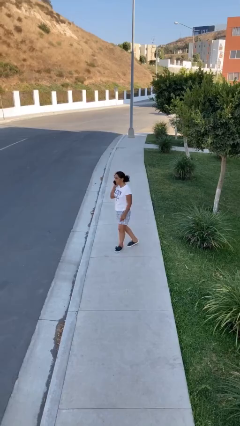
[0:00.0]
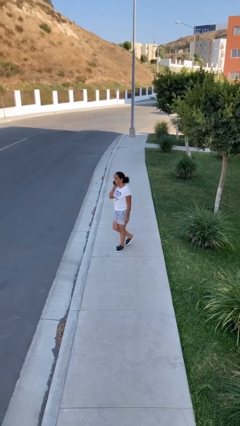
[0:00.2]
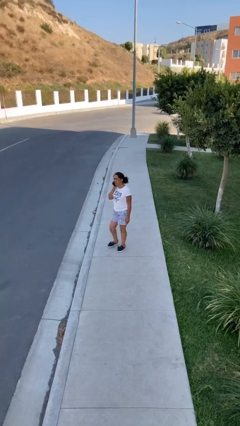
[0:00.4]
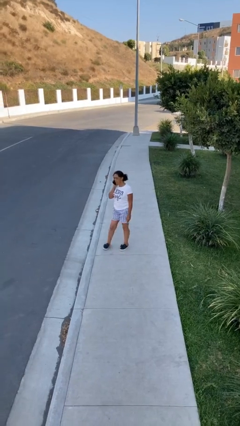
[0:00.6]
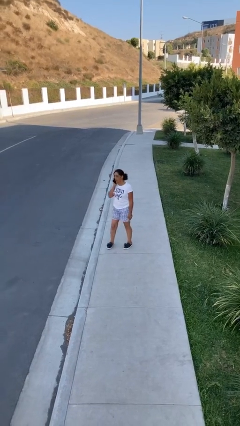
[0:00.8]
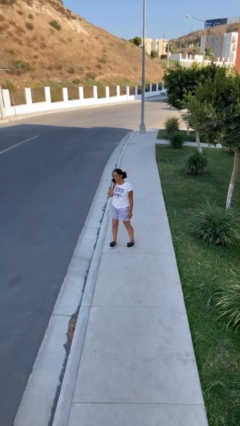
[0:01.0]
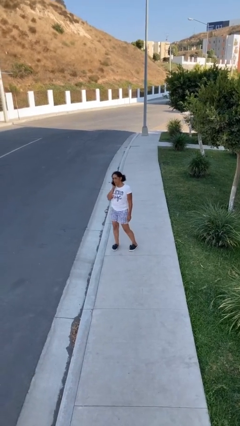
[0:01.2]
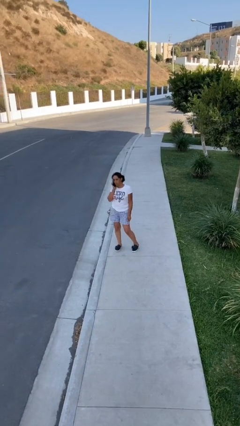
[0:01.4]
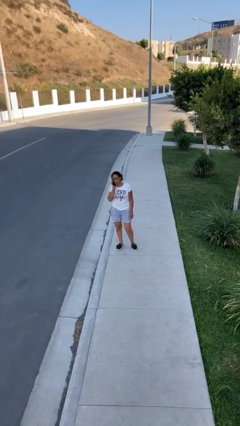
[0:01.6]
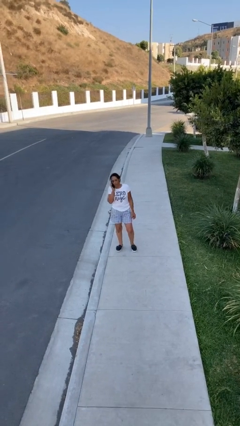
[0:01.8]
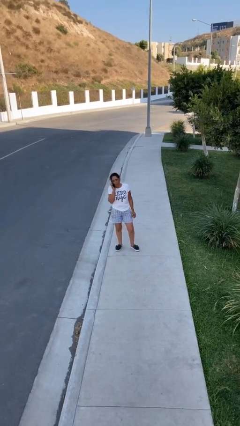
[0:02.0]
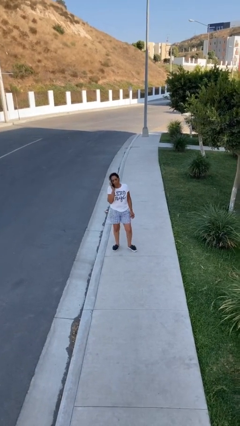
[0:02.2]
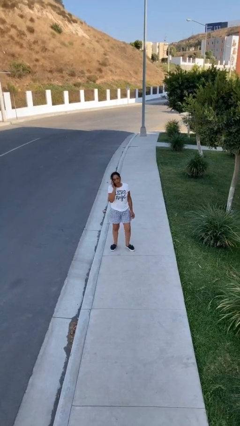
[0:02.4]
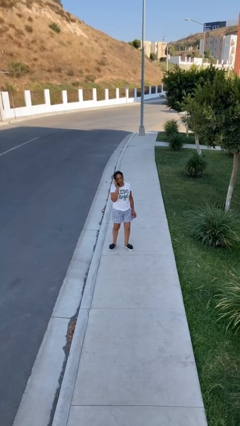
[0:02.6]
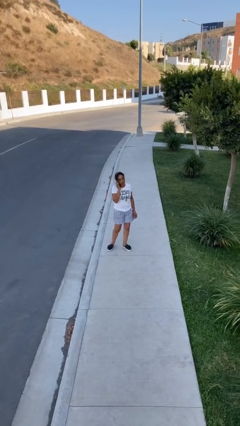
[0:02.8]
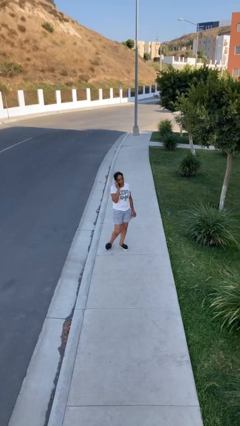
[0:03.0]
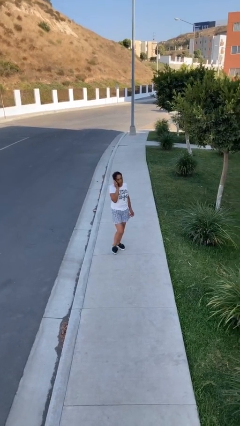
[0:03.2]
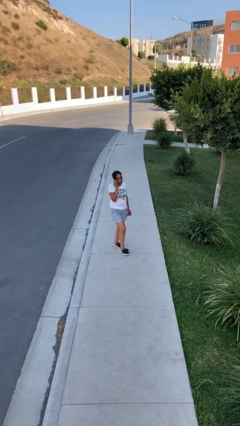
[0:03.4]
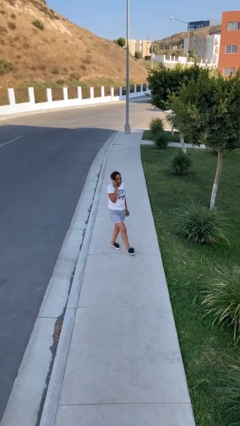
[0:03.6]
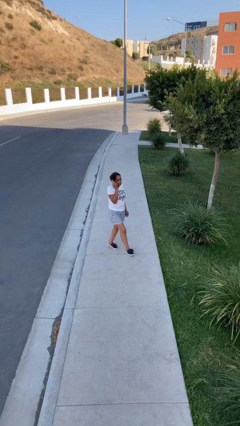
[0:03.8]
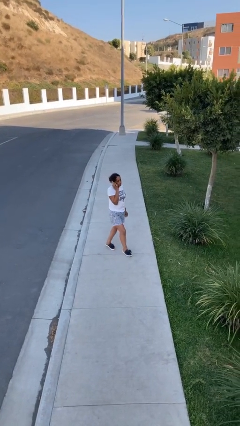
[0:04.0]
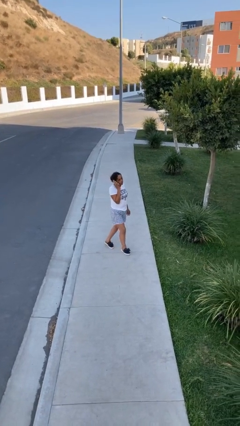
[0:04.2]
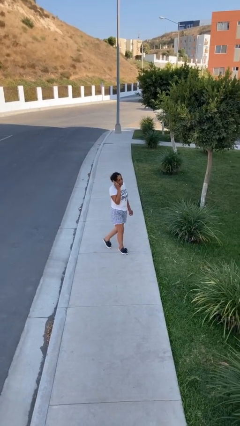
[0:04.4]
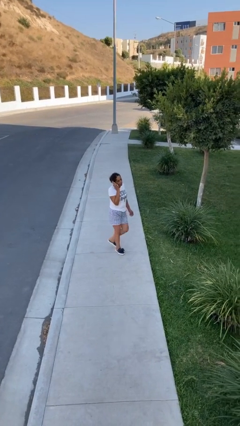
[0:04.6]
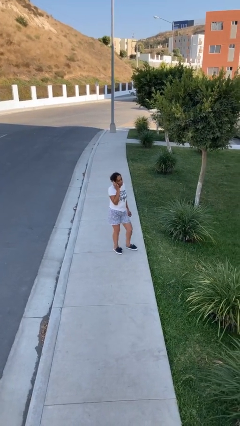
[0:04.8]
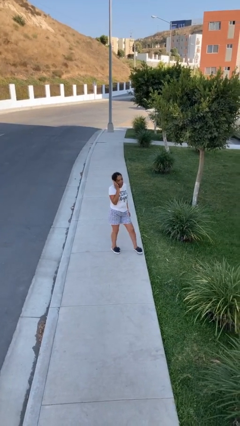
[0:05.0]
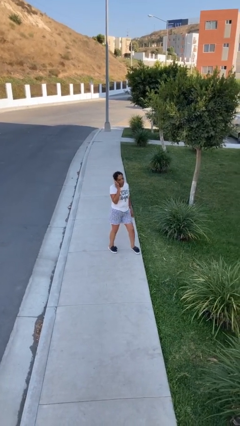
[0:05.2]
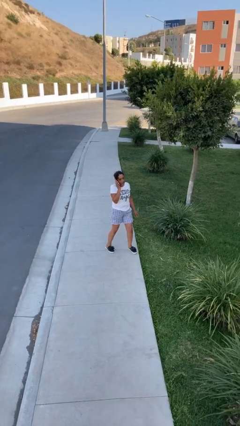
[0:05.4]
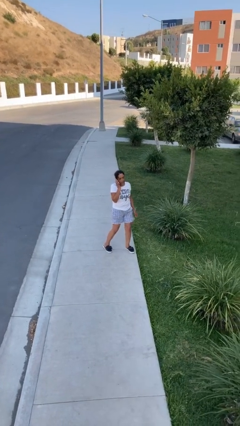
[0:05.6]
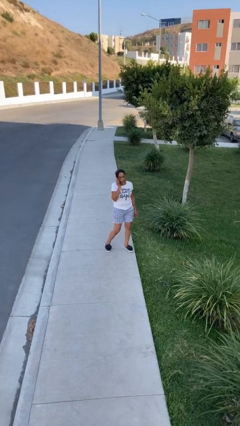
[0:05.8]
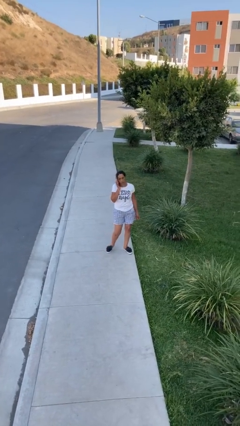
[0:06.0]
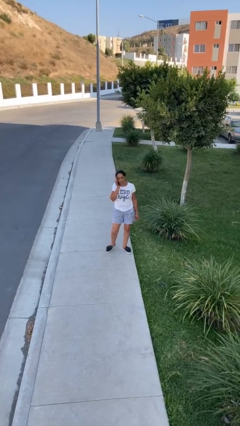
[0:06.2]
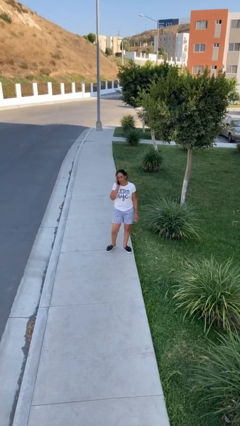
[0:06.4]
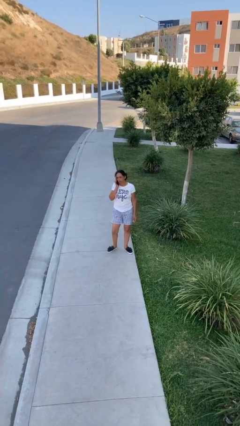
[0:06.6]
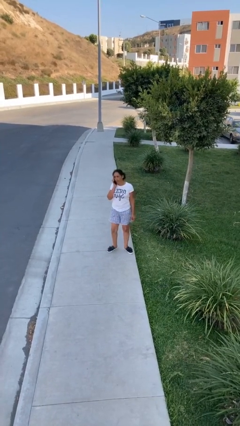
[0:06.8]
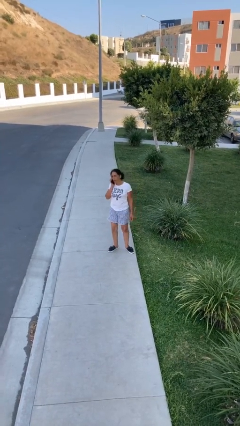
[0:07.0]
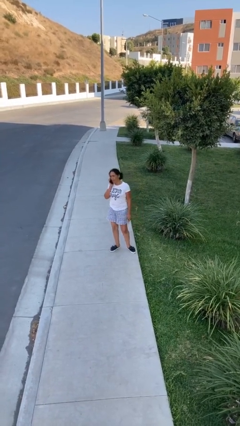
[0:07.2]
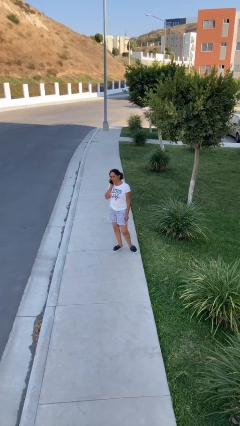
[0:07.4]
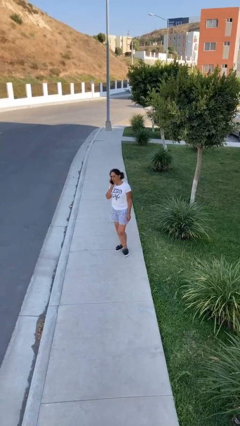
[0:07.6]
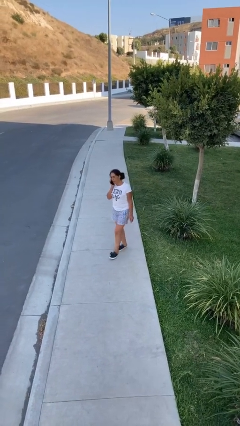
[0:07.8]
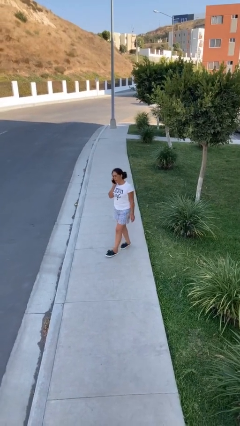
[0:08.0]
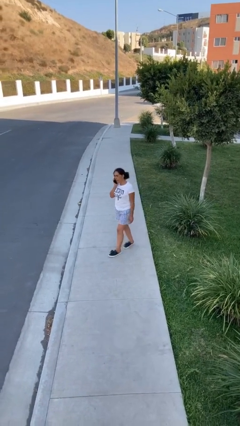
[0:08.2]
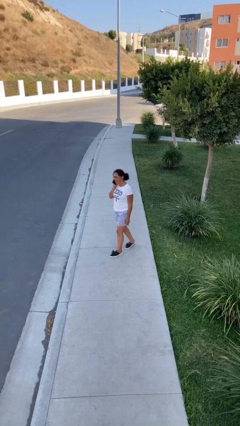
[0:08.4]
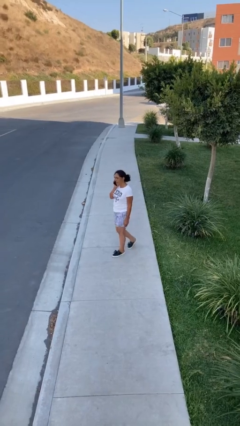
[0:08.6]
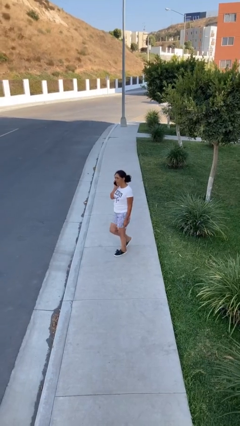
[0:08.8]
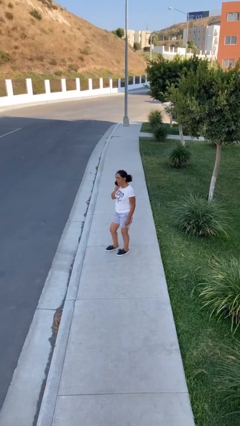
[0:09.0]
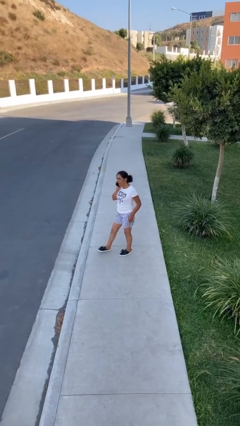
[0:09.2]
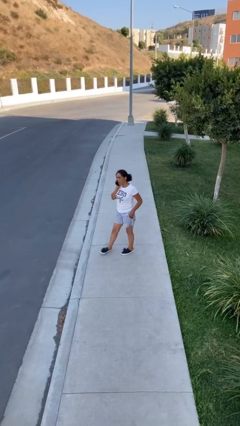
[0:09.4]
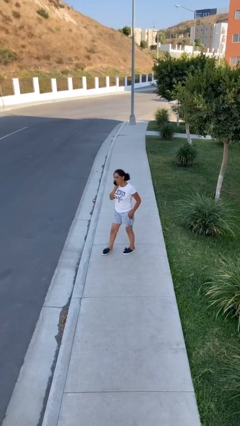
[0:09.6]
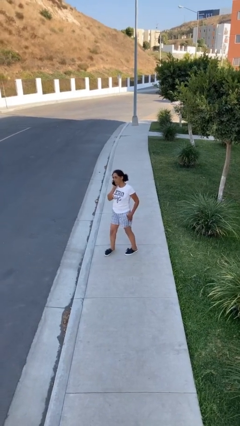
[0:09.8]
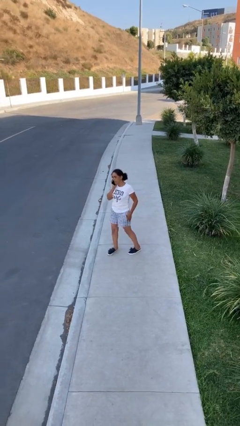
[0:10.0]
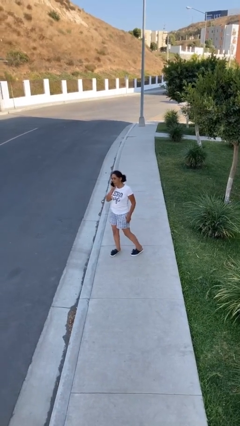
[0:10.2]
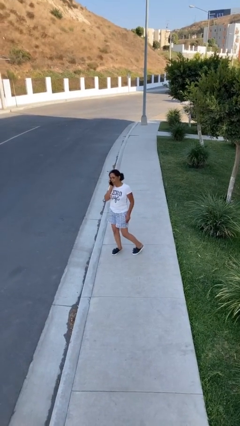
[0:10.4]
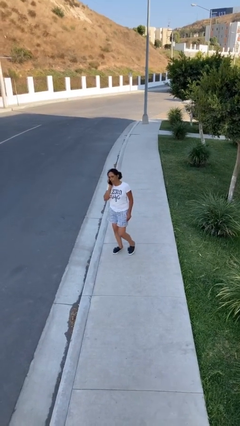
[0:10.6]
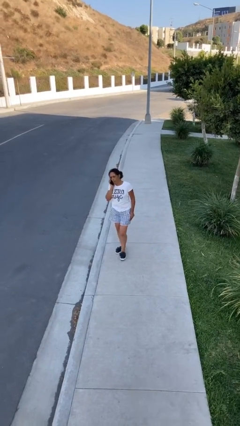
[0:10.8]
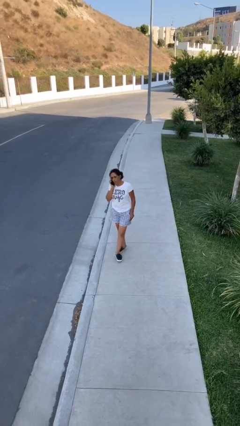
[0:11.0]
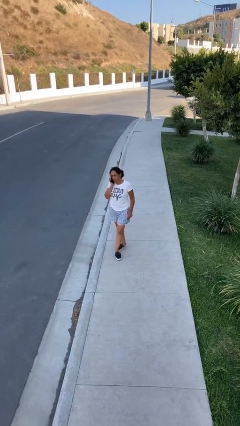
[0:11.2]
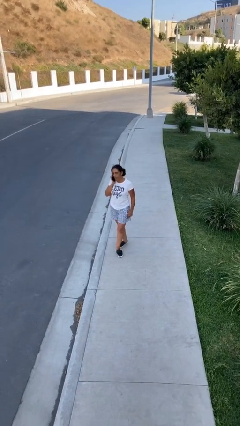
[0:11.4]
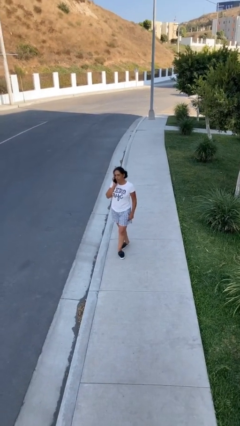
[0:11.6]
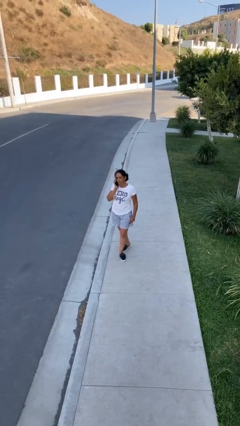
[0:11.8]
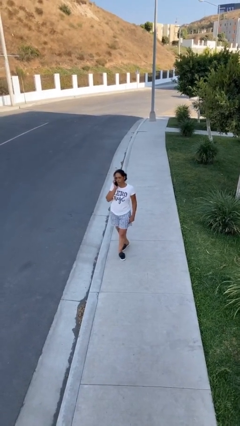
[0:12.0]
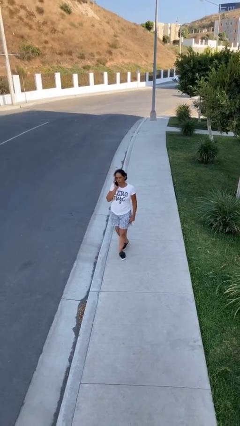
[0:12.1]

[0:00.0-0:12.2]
person talks on phone

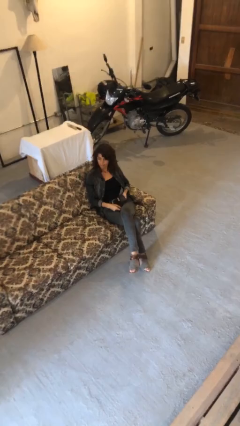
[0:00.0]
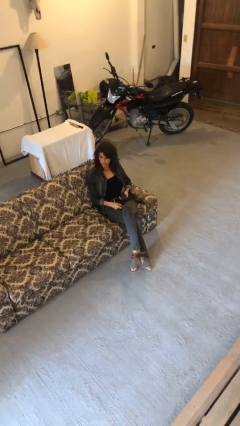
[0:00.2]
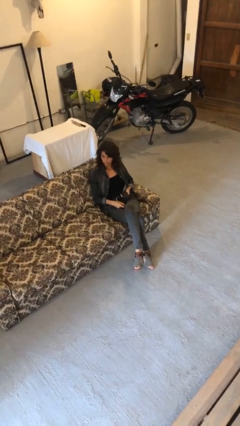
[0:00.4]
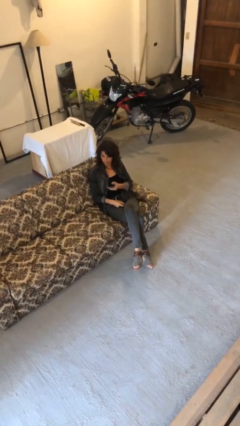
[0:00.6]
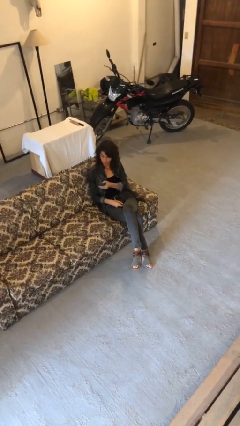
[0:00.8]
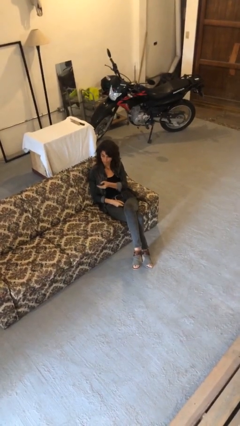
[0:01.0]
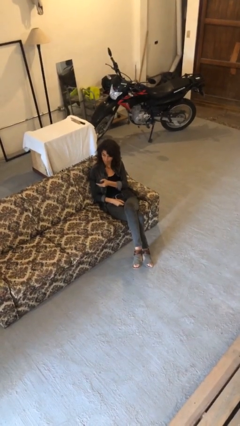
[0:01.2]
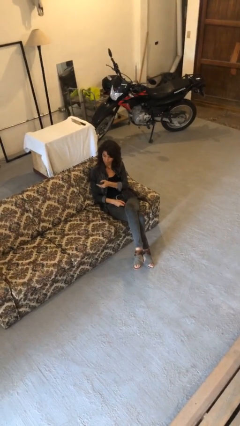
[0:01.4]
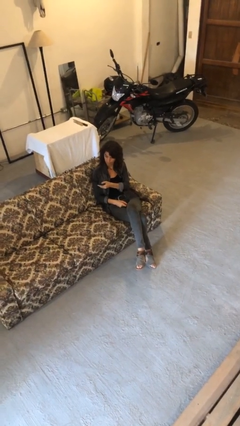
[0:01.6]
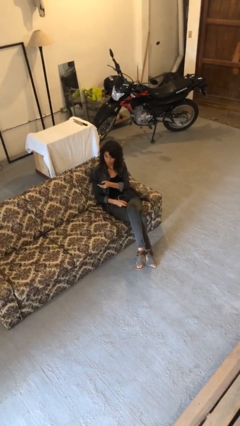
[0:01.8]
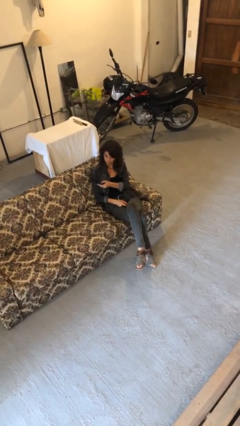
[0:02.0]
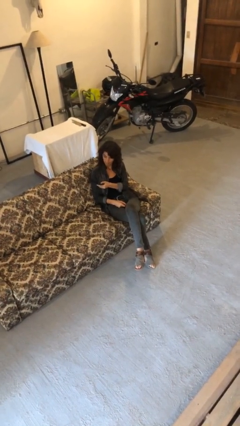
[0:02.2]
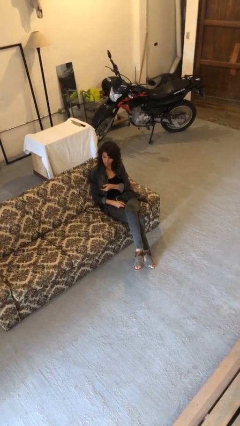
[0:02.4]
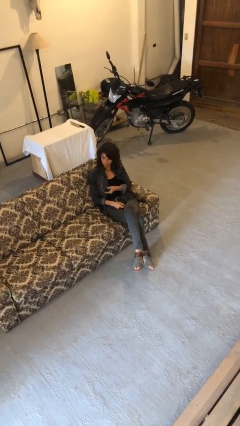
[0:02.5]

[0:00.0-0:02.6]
person uses television remote

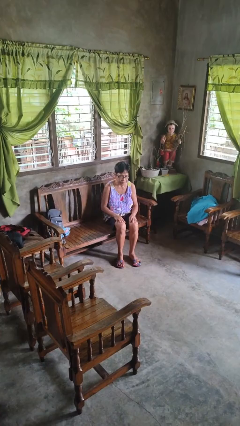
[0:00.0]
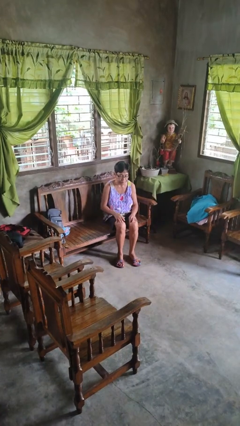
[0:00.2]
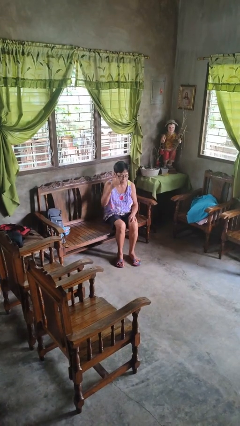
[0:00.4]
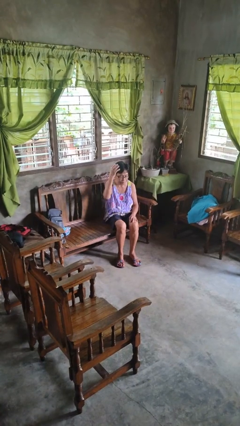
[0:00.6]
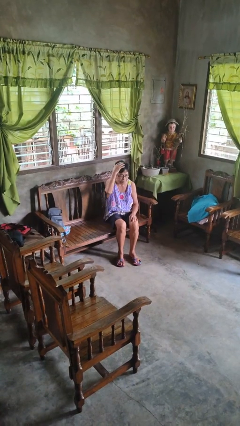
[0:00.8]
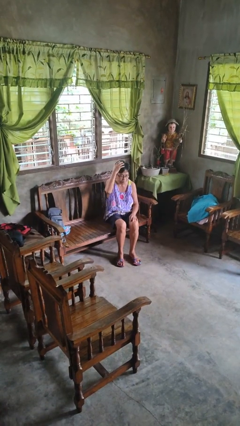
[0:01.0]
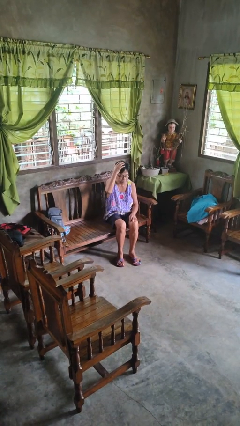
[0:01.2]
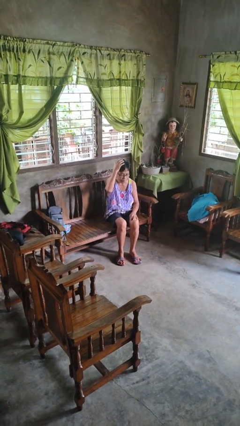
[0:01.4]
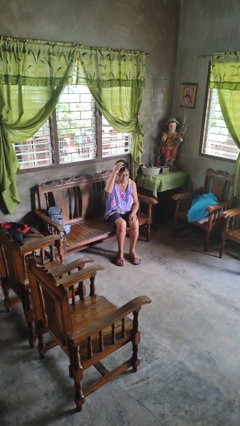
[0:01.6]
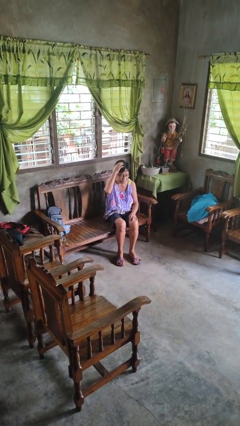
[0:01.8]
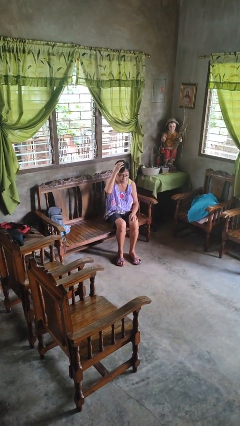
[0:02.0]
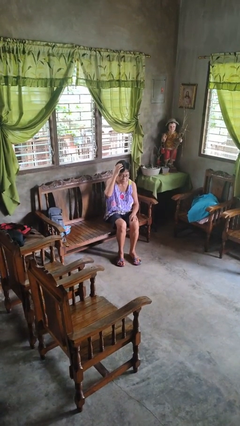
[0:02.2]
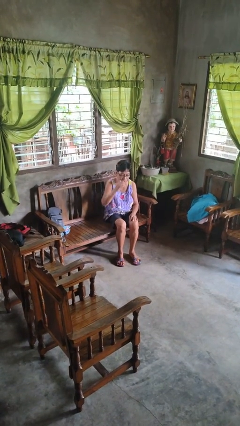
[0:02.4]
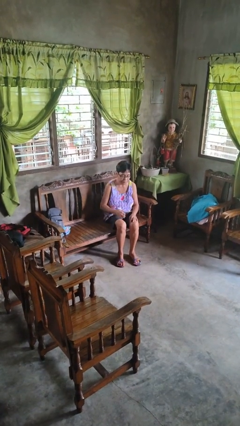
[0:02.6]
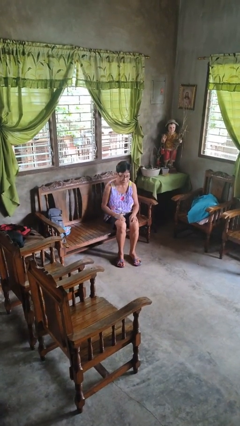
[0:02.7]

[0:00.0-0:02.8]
person pats head

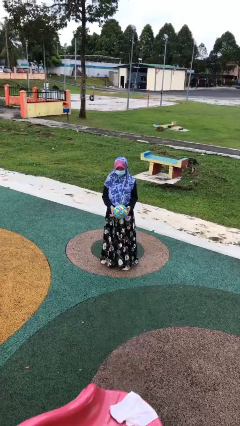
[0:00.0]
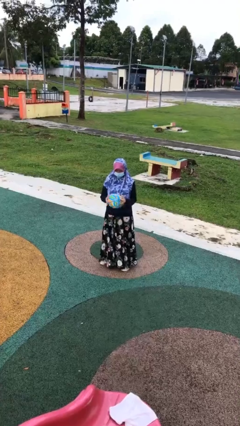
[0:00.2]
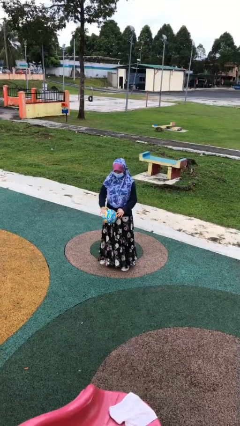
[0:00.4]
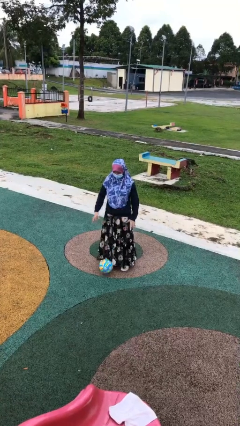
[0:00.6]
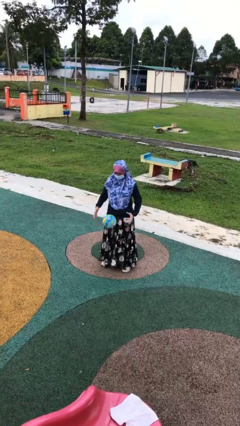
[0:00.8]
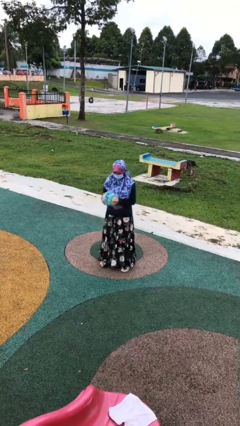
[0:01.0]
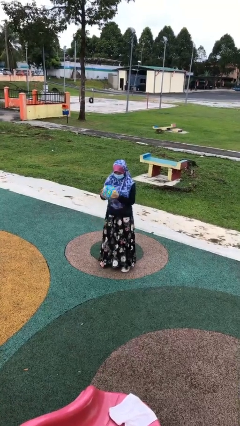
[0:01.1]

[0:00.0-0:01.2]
person bounces ball on floor
